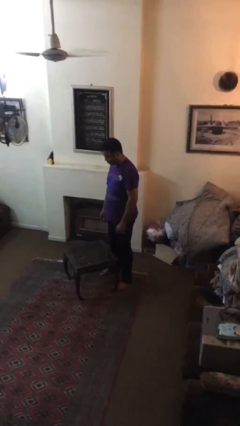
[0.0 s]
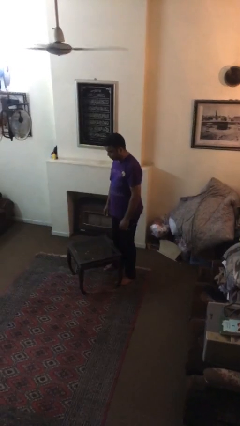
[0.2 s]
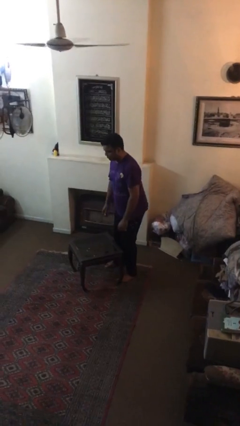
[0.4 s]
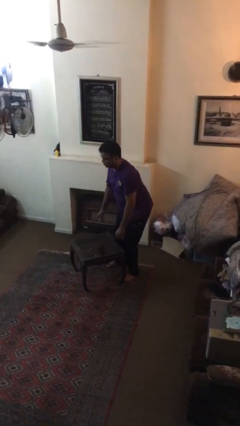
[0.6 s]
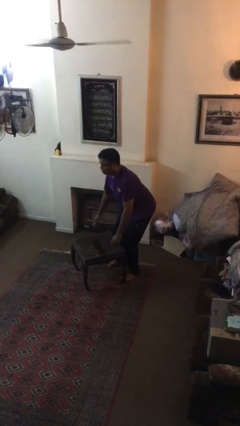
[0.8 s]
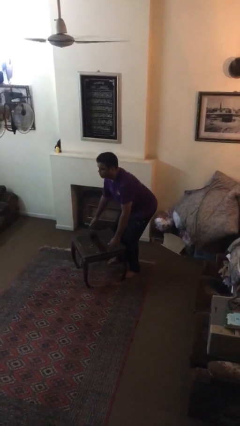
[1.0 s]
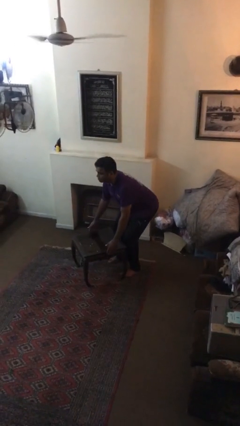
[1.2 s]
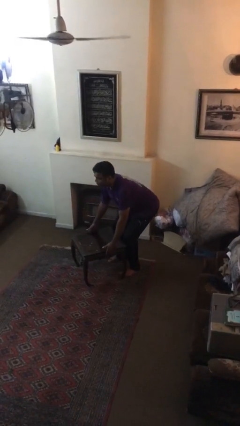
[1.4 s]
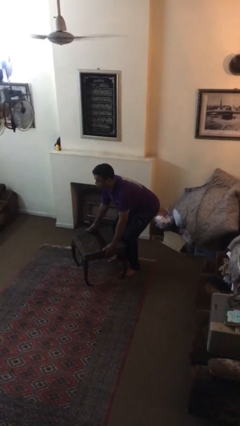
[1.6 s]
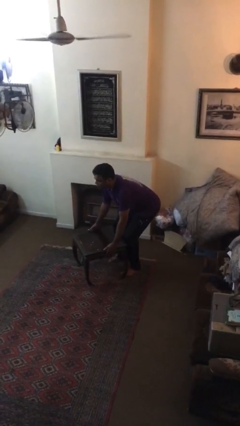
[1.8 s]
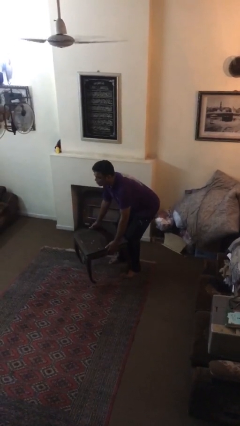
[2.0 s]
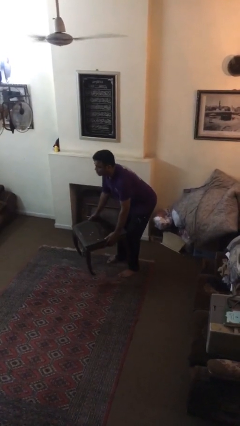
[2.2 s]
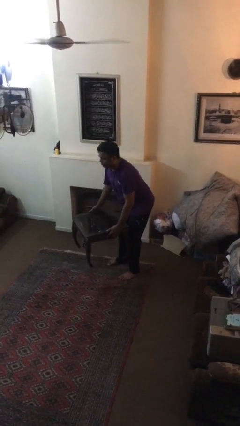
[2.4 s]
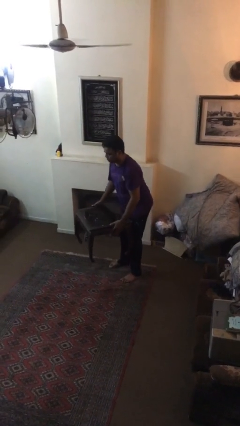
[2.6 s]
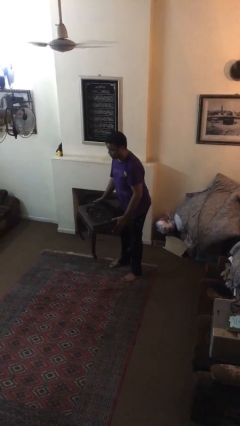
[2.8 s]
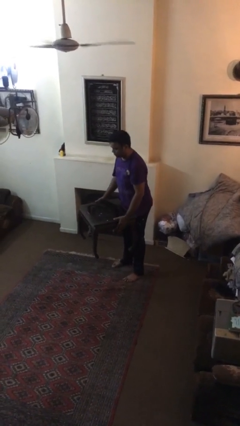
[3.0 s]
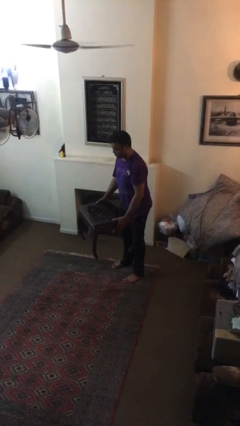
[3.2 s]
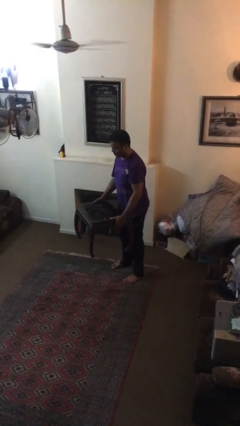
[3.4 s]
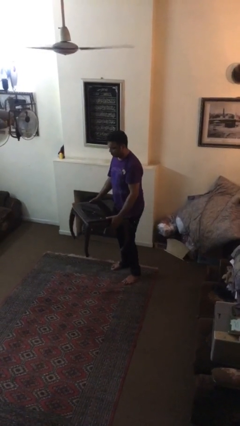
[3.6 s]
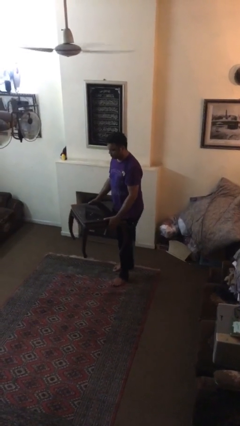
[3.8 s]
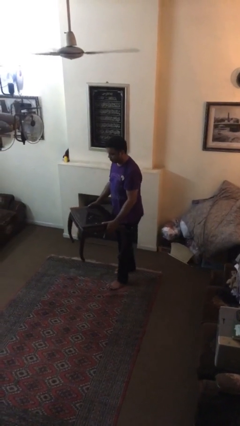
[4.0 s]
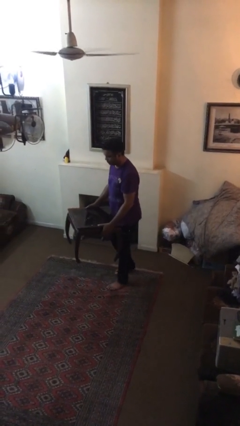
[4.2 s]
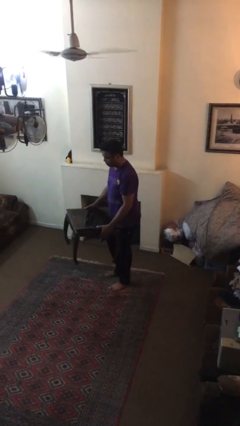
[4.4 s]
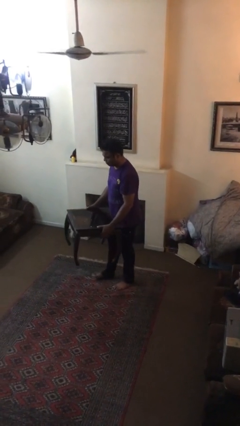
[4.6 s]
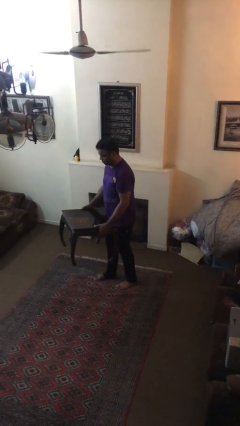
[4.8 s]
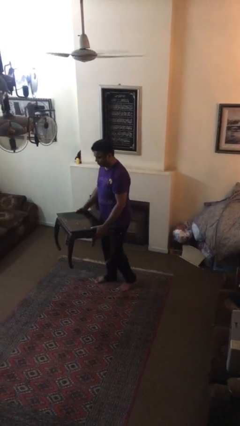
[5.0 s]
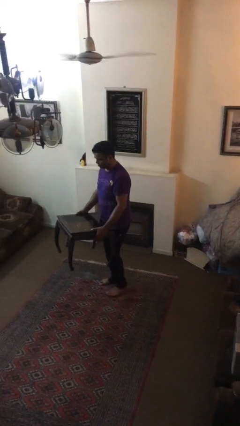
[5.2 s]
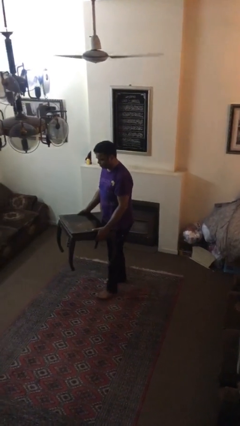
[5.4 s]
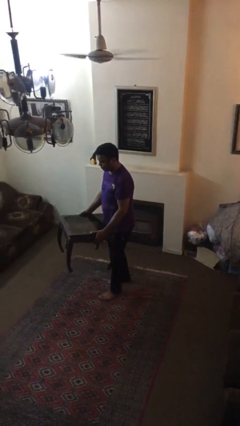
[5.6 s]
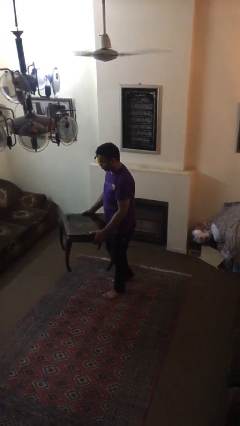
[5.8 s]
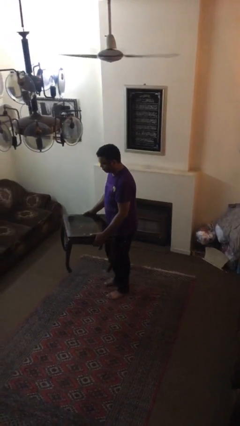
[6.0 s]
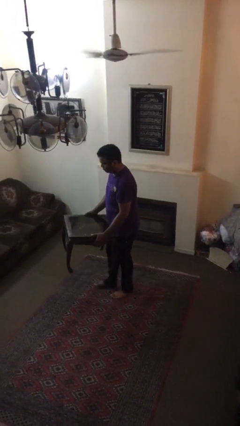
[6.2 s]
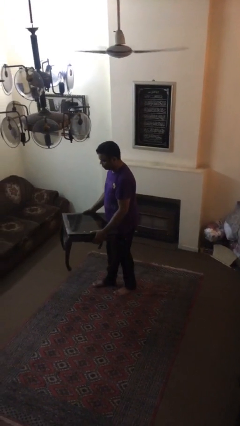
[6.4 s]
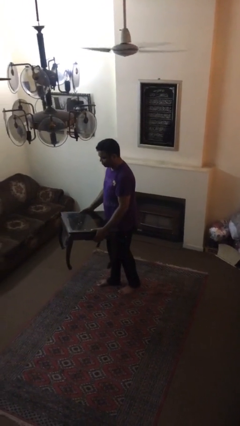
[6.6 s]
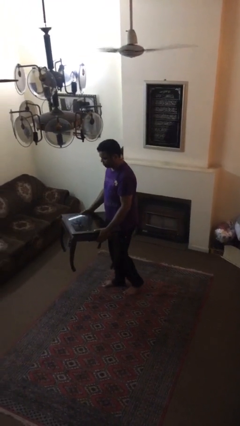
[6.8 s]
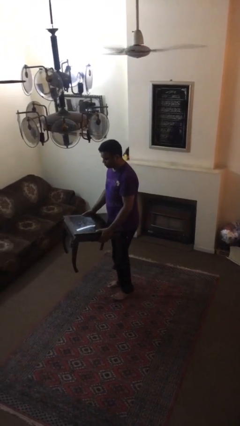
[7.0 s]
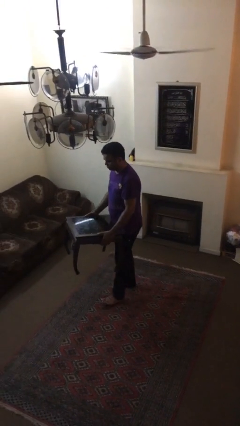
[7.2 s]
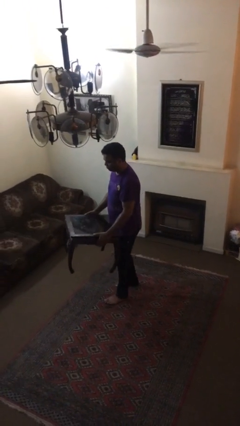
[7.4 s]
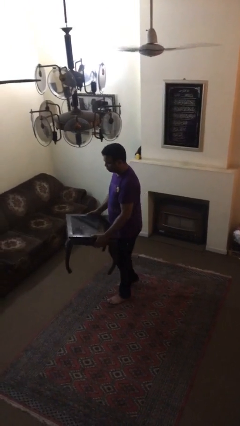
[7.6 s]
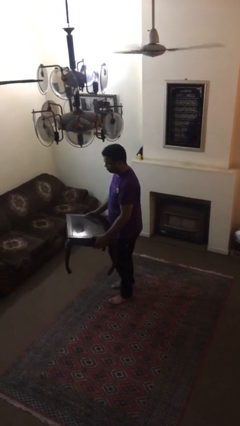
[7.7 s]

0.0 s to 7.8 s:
person carries heavy object

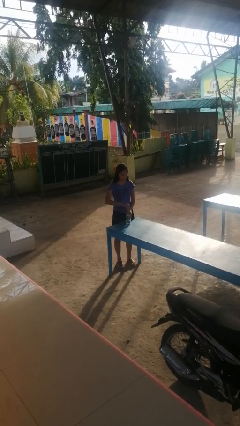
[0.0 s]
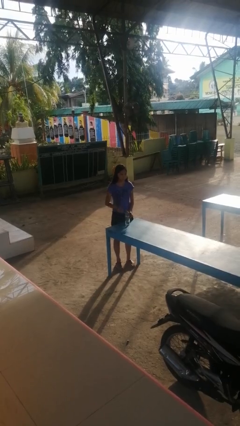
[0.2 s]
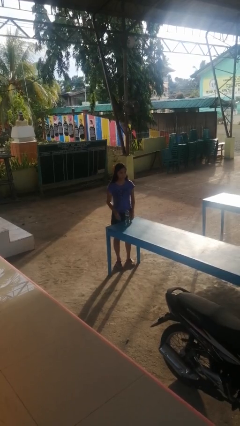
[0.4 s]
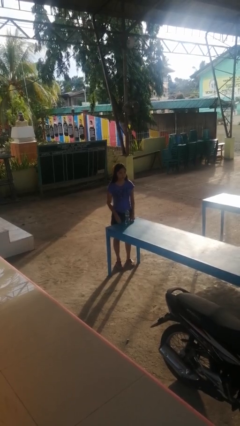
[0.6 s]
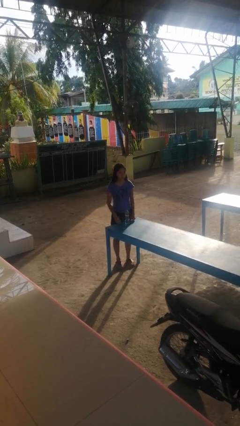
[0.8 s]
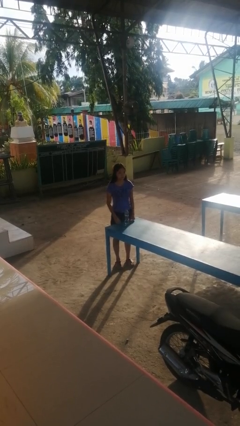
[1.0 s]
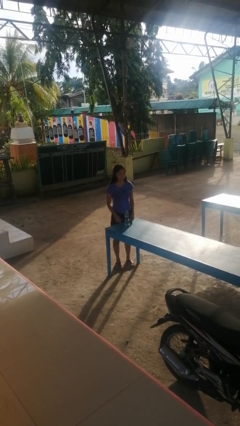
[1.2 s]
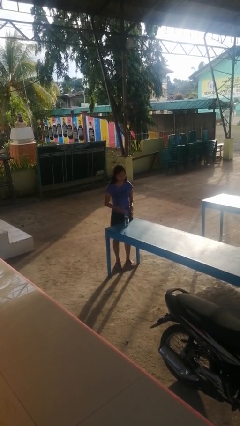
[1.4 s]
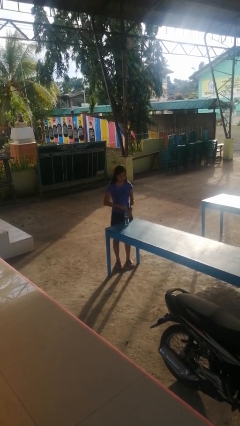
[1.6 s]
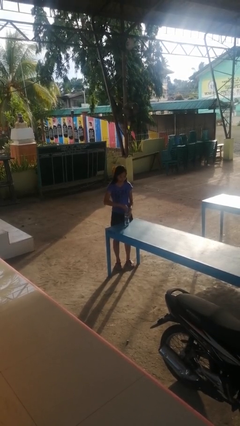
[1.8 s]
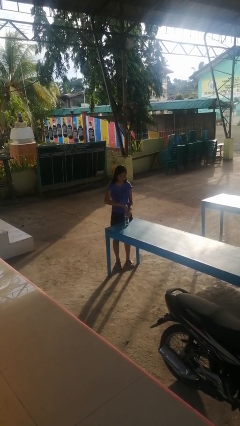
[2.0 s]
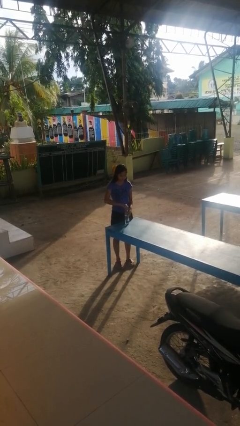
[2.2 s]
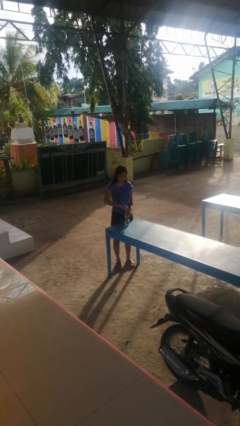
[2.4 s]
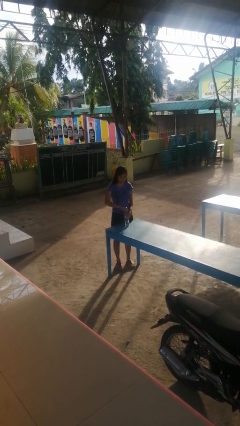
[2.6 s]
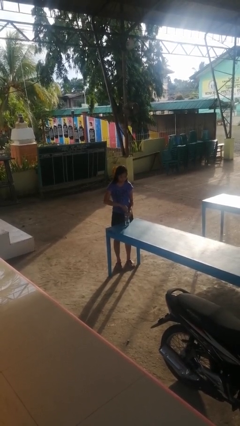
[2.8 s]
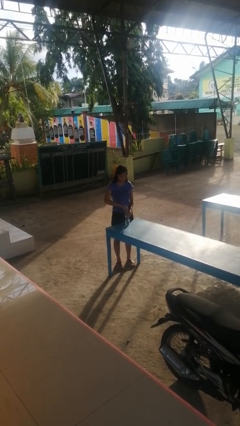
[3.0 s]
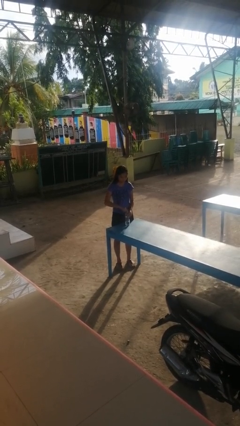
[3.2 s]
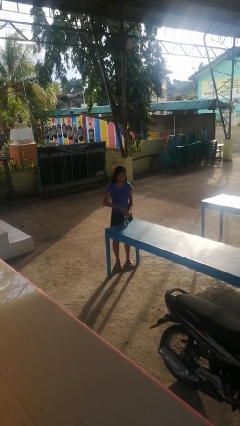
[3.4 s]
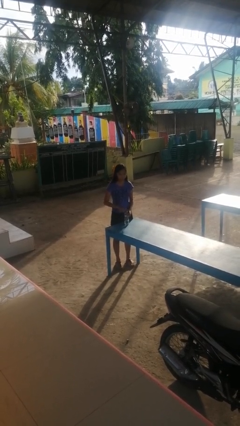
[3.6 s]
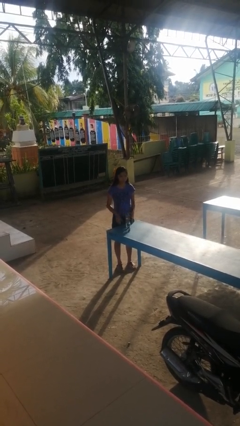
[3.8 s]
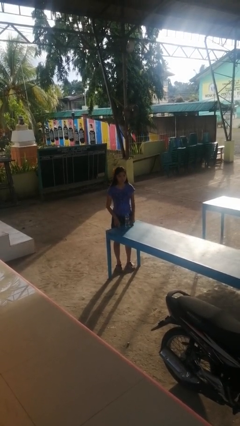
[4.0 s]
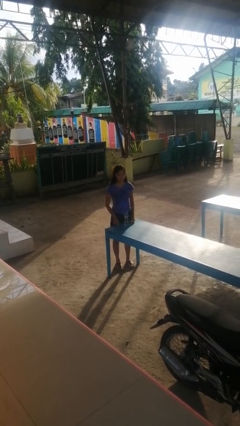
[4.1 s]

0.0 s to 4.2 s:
person screws lid to bottle

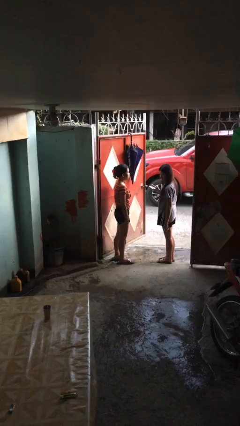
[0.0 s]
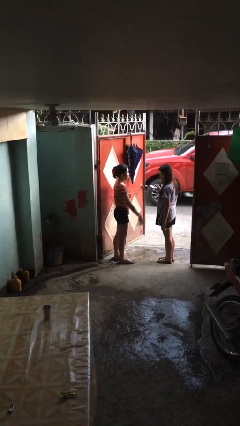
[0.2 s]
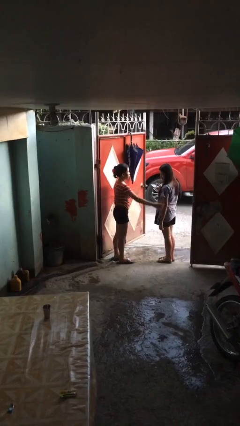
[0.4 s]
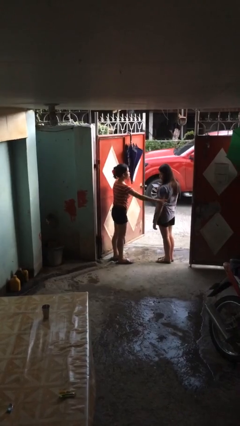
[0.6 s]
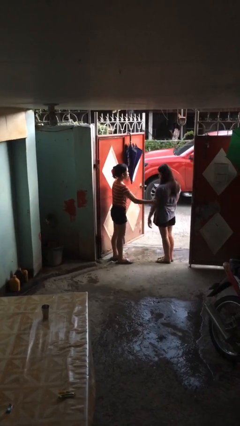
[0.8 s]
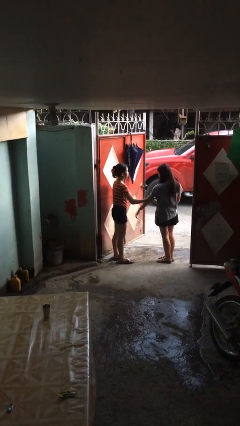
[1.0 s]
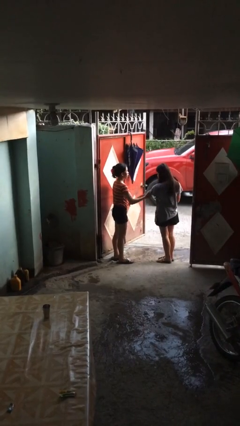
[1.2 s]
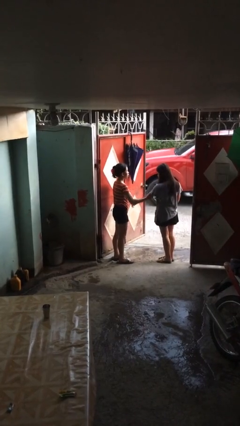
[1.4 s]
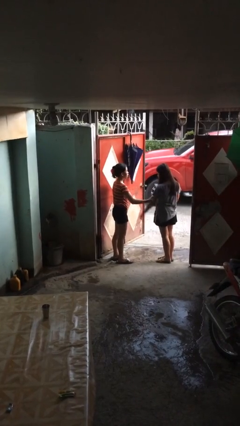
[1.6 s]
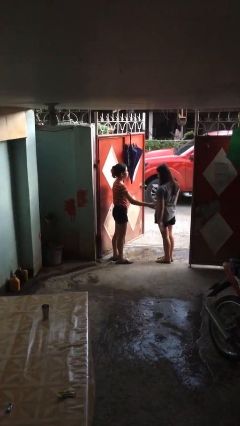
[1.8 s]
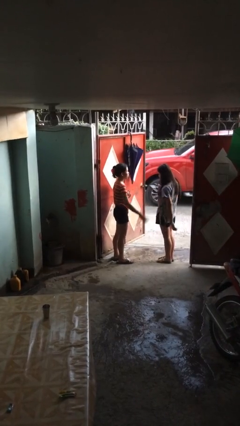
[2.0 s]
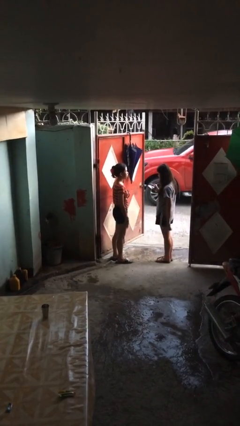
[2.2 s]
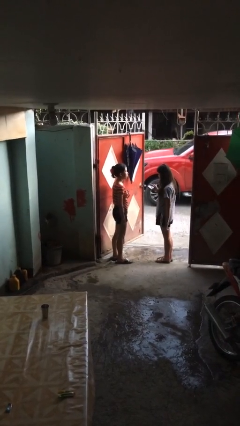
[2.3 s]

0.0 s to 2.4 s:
person grabs person by bicep

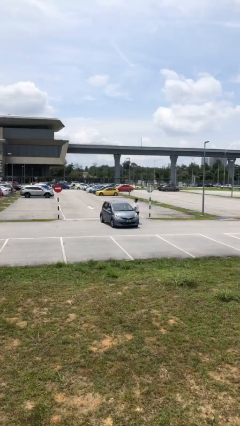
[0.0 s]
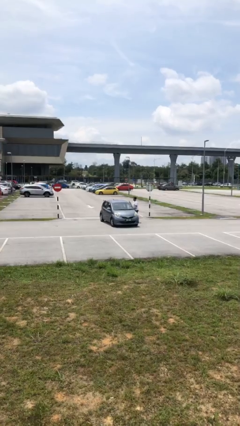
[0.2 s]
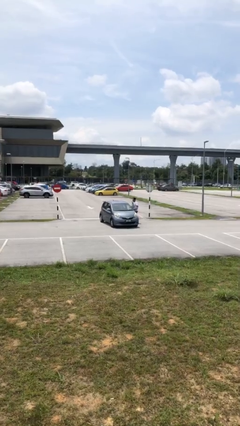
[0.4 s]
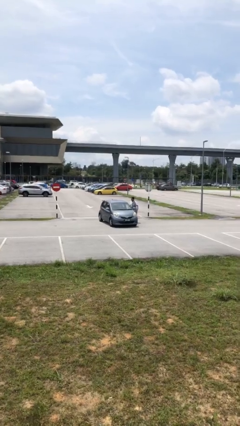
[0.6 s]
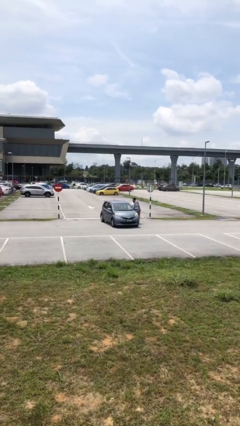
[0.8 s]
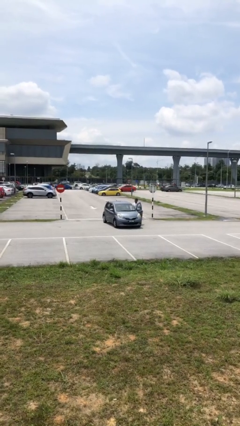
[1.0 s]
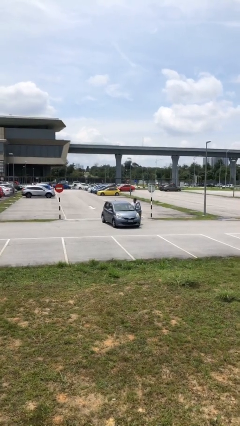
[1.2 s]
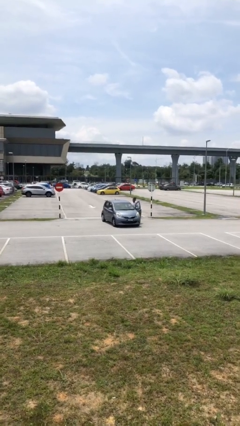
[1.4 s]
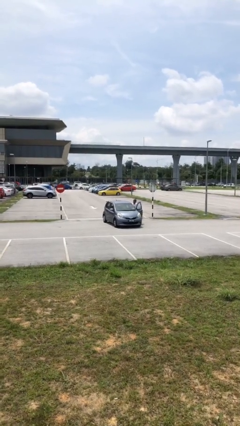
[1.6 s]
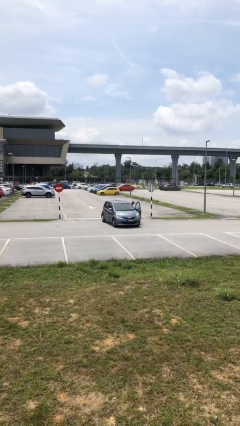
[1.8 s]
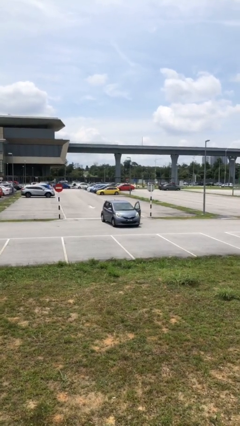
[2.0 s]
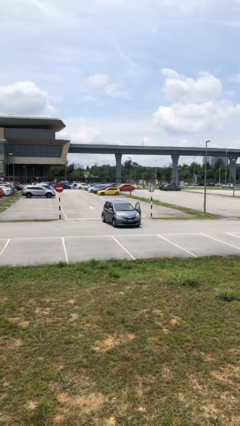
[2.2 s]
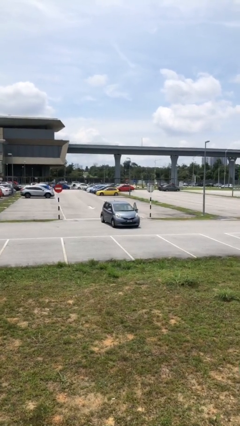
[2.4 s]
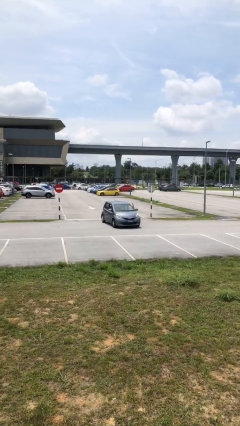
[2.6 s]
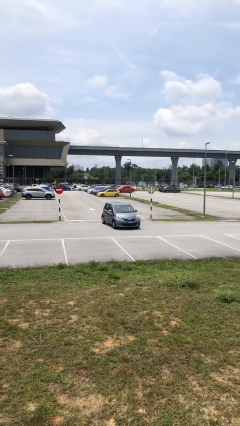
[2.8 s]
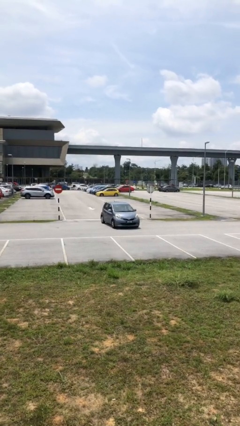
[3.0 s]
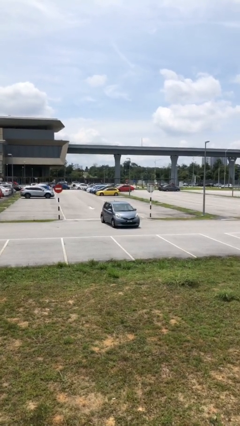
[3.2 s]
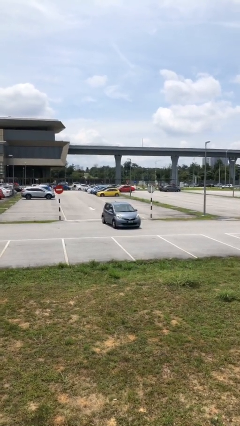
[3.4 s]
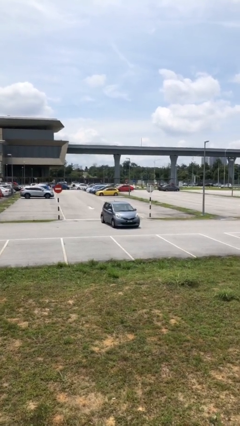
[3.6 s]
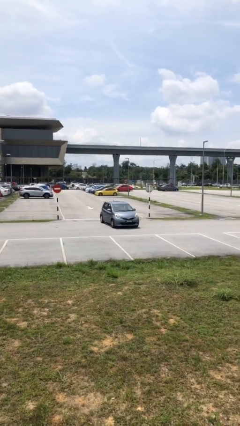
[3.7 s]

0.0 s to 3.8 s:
car picks up person
